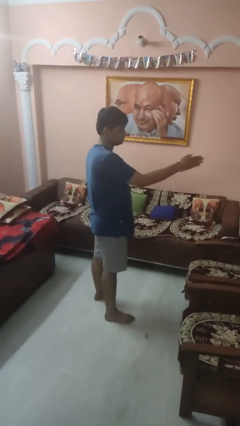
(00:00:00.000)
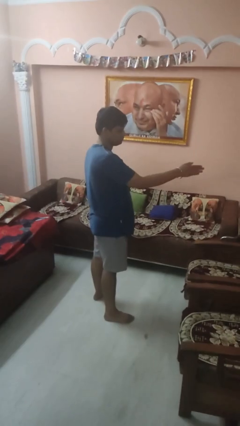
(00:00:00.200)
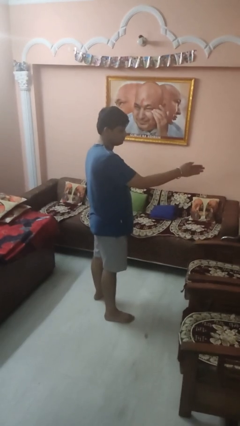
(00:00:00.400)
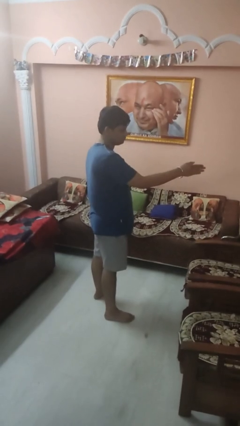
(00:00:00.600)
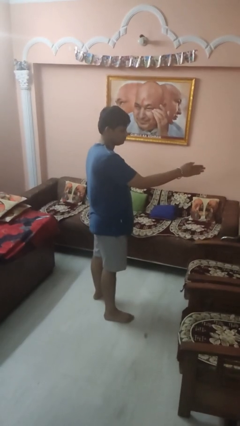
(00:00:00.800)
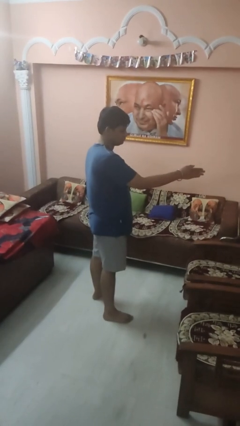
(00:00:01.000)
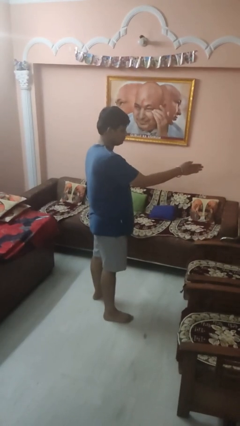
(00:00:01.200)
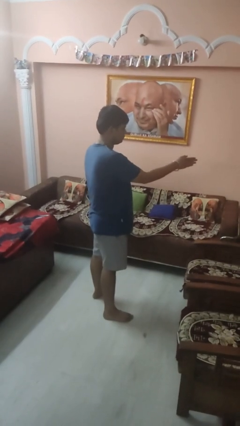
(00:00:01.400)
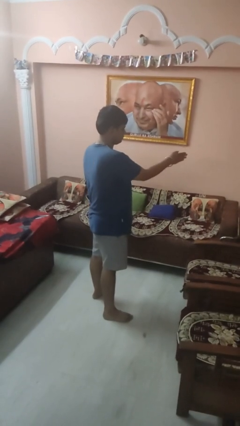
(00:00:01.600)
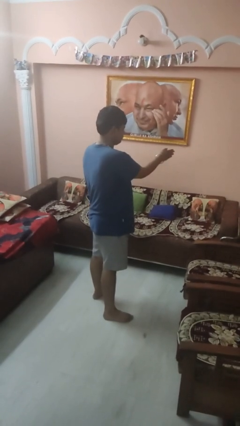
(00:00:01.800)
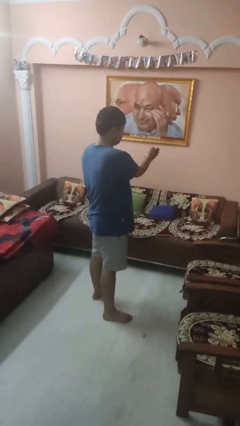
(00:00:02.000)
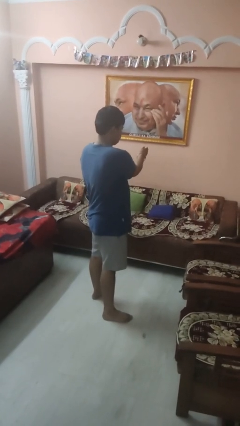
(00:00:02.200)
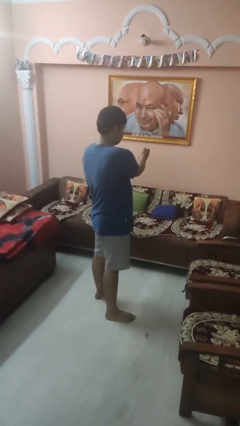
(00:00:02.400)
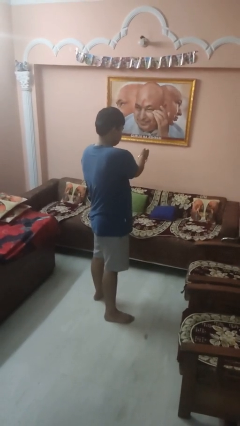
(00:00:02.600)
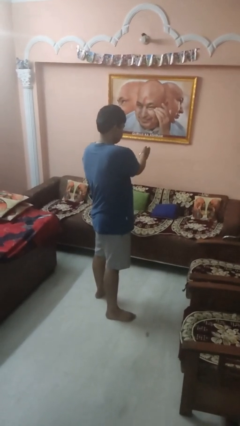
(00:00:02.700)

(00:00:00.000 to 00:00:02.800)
person gestures swipe left

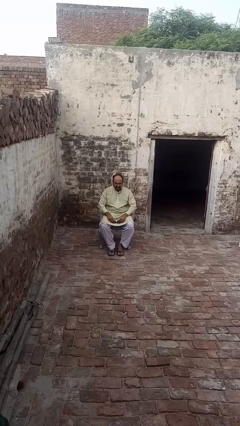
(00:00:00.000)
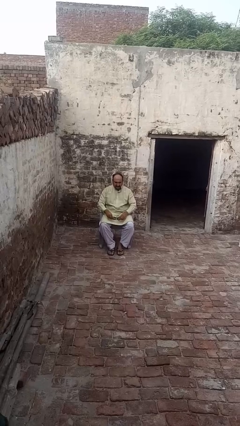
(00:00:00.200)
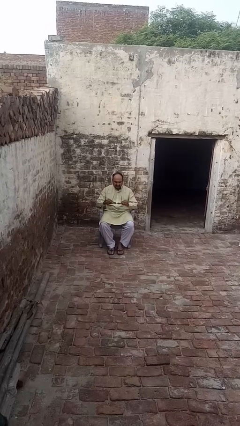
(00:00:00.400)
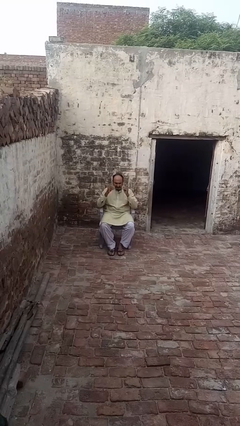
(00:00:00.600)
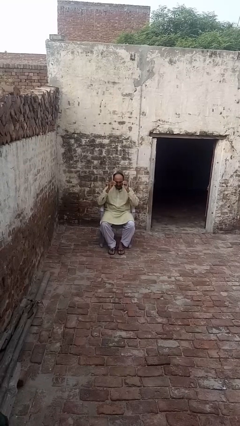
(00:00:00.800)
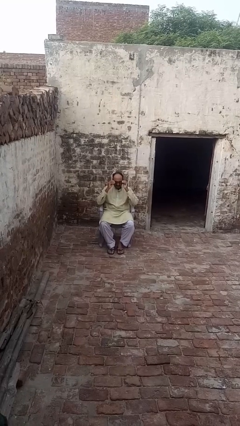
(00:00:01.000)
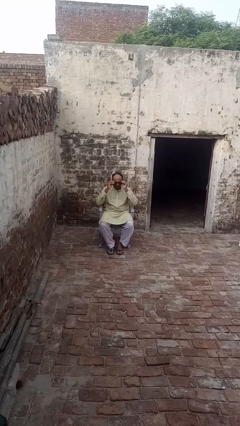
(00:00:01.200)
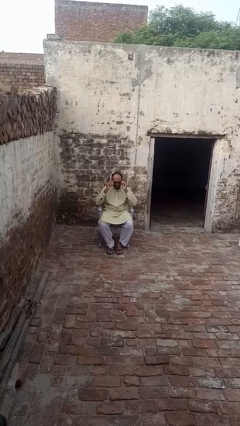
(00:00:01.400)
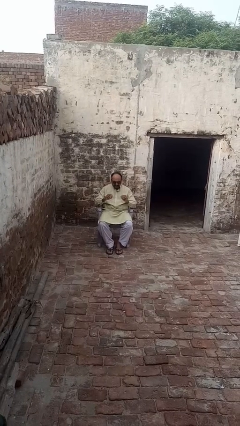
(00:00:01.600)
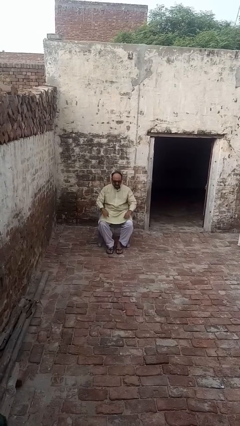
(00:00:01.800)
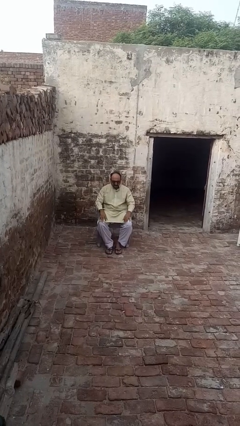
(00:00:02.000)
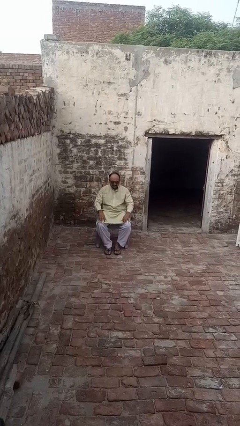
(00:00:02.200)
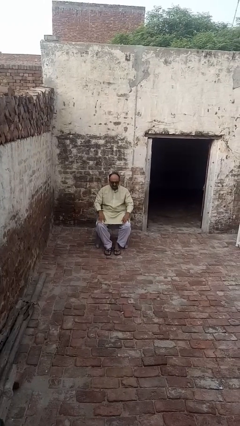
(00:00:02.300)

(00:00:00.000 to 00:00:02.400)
person puts on sunglasses

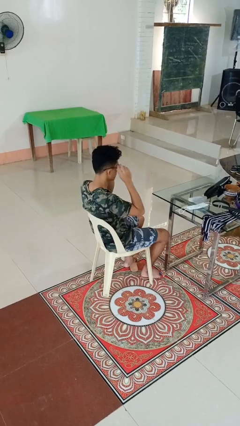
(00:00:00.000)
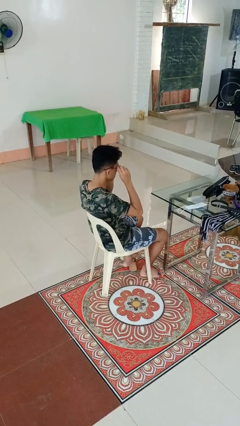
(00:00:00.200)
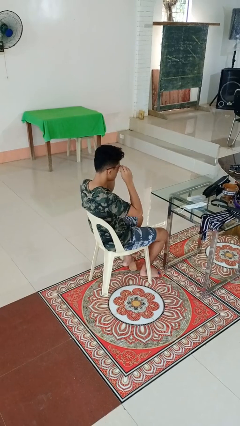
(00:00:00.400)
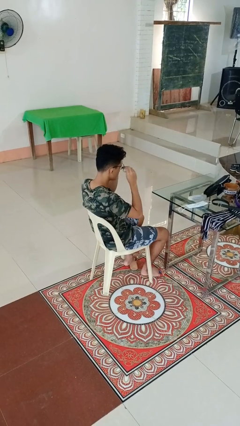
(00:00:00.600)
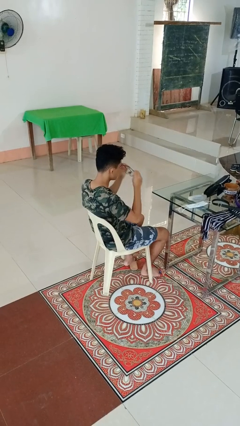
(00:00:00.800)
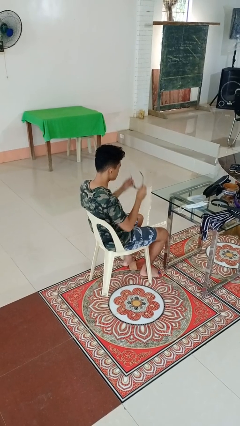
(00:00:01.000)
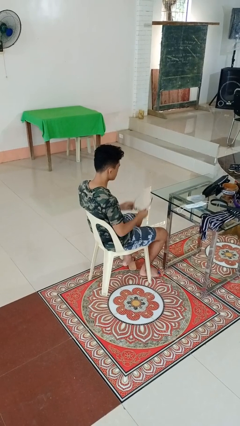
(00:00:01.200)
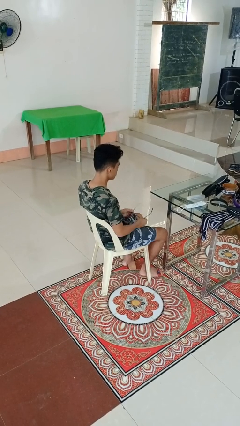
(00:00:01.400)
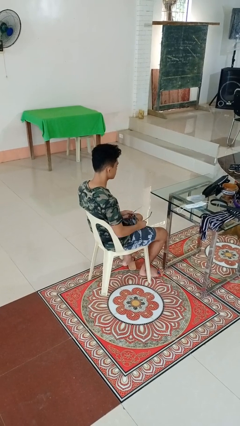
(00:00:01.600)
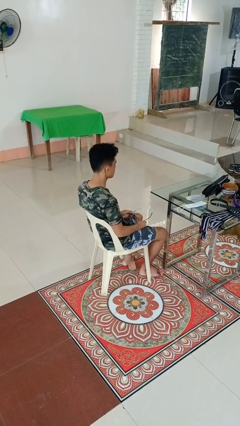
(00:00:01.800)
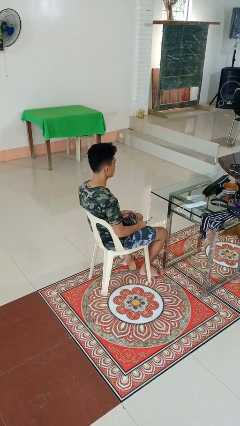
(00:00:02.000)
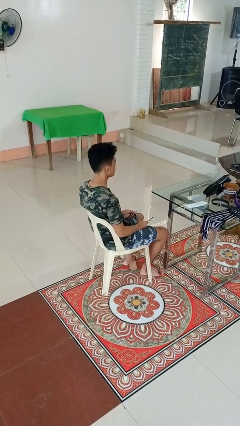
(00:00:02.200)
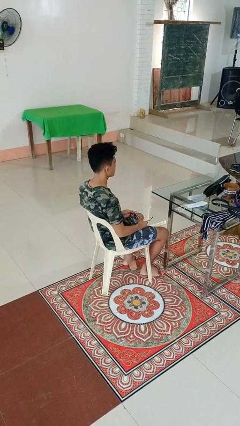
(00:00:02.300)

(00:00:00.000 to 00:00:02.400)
person takes off glasses

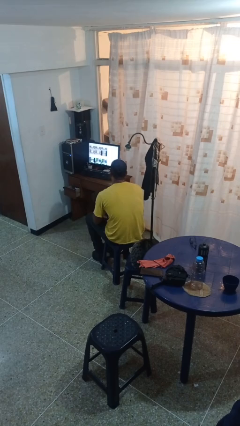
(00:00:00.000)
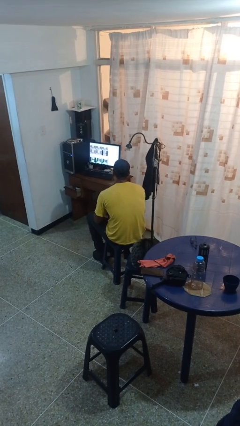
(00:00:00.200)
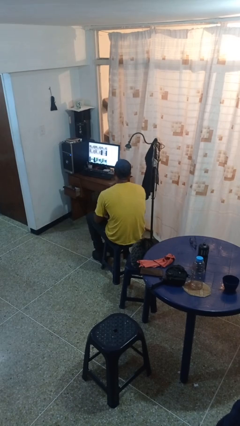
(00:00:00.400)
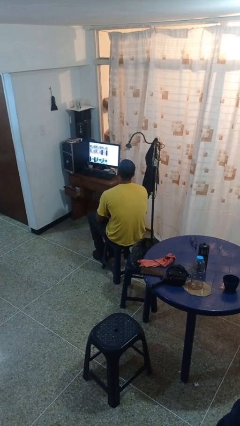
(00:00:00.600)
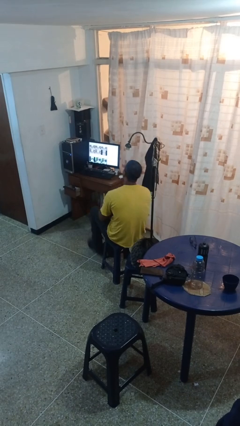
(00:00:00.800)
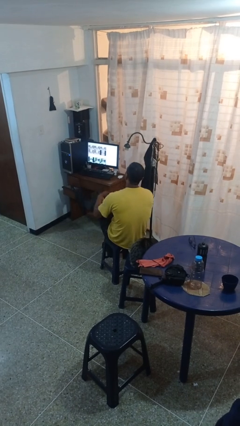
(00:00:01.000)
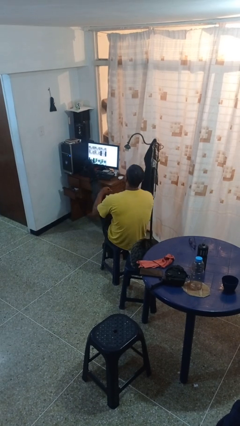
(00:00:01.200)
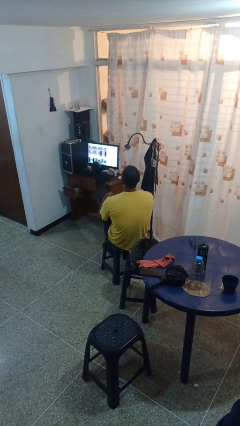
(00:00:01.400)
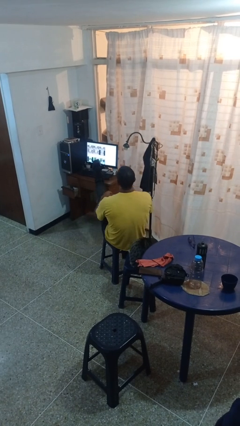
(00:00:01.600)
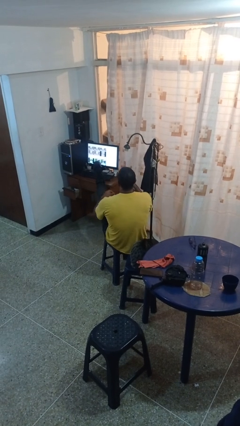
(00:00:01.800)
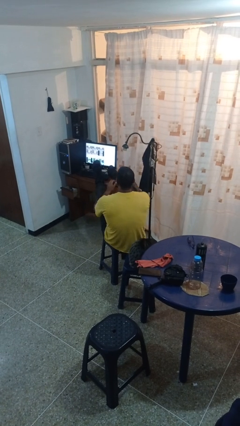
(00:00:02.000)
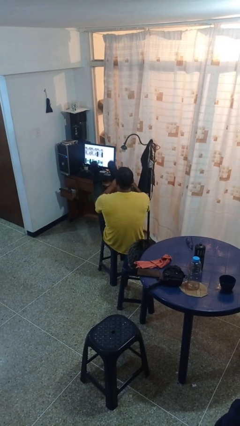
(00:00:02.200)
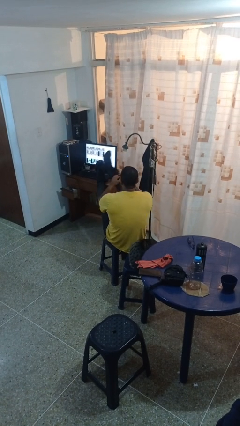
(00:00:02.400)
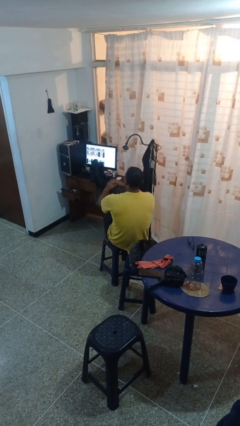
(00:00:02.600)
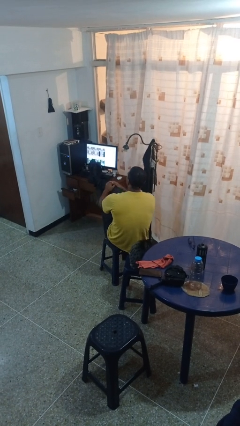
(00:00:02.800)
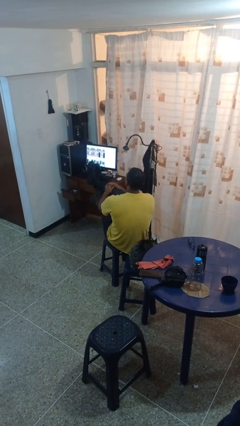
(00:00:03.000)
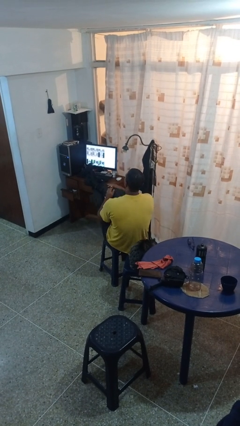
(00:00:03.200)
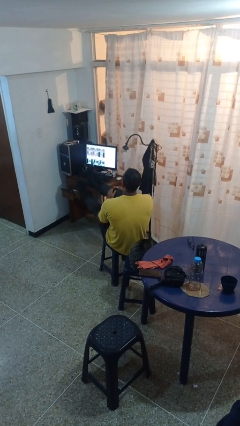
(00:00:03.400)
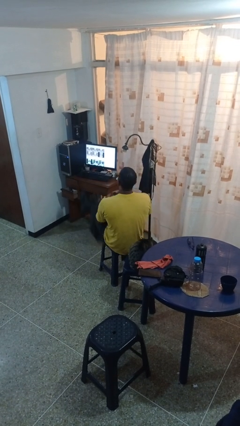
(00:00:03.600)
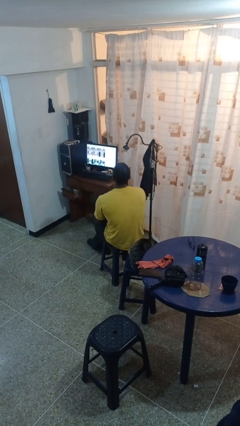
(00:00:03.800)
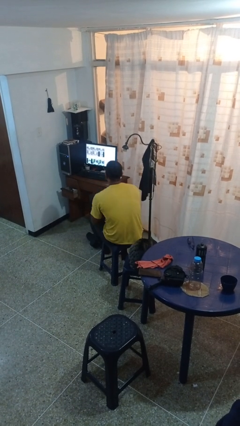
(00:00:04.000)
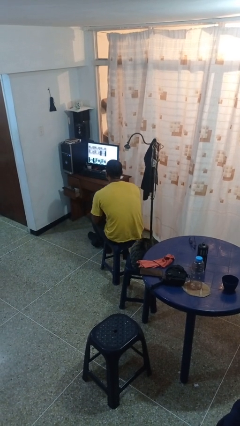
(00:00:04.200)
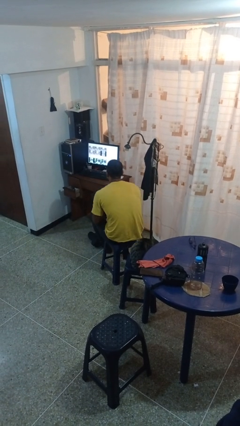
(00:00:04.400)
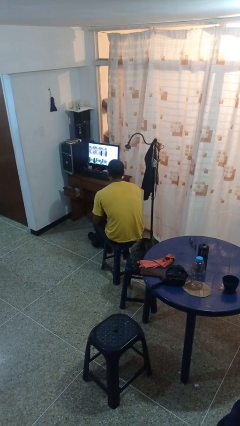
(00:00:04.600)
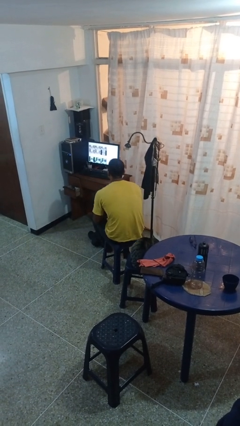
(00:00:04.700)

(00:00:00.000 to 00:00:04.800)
person puts feet up

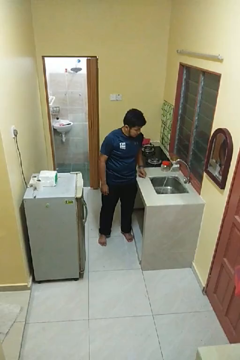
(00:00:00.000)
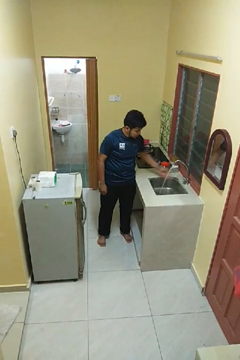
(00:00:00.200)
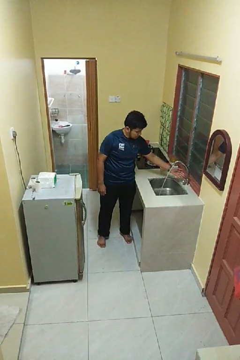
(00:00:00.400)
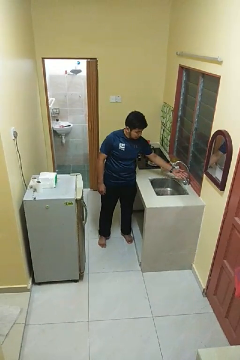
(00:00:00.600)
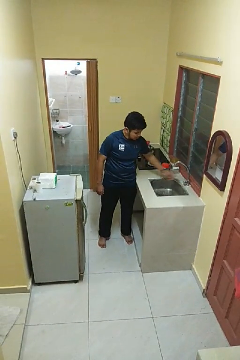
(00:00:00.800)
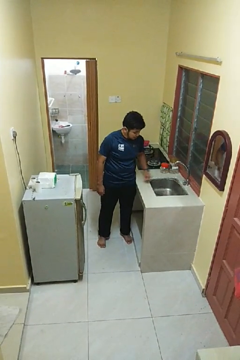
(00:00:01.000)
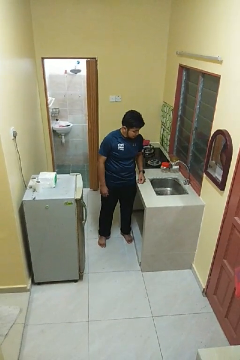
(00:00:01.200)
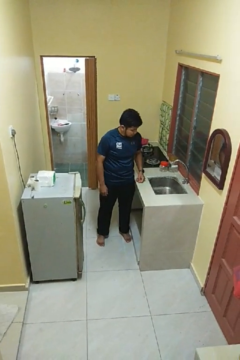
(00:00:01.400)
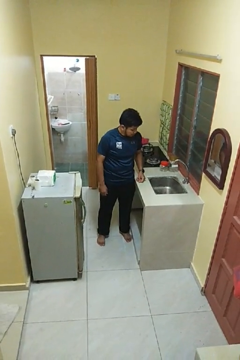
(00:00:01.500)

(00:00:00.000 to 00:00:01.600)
person turns off faucet

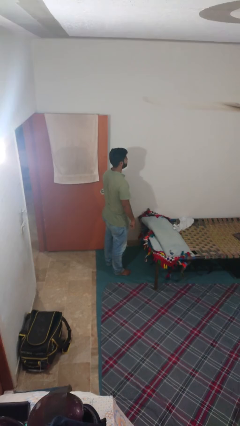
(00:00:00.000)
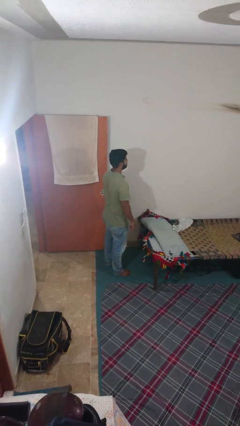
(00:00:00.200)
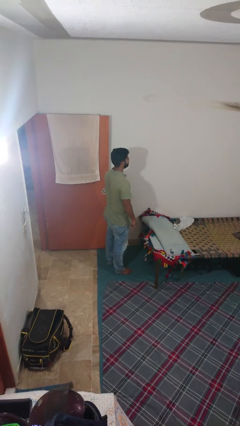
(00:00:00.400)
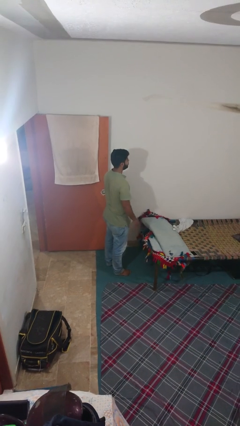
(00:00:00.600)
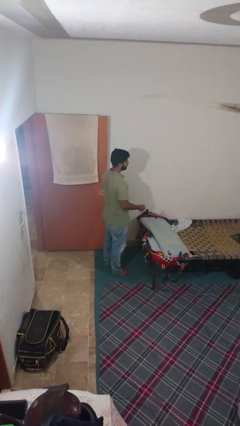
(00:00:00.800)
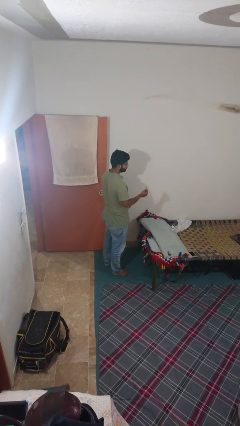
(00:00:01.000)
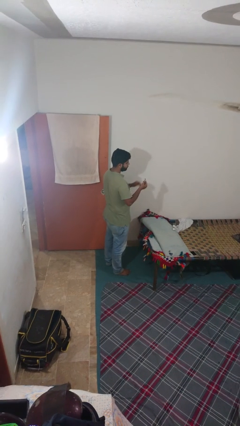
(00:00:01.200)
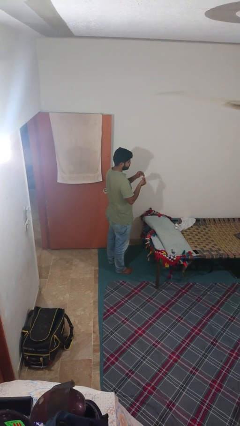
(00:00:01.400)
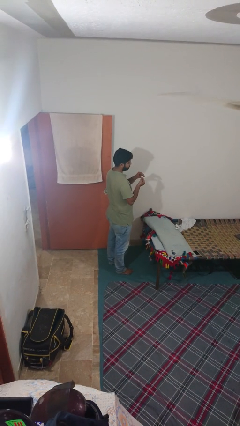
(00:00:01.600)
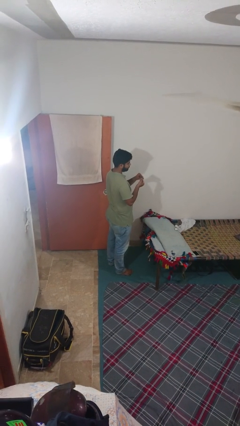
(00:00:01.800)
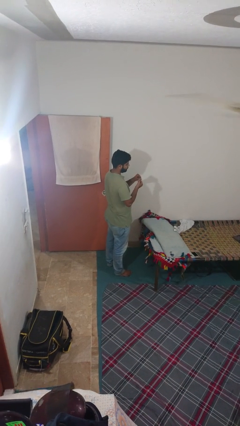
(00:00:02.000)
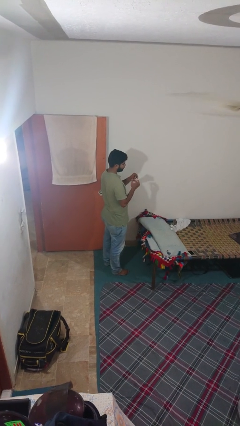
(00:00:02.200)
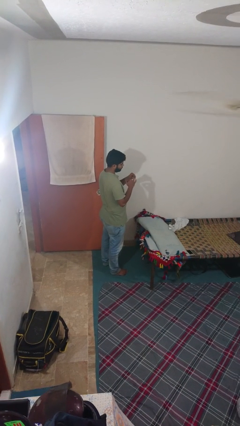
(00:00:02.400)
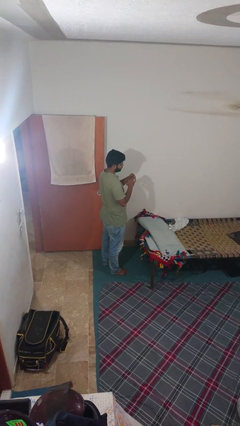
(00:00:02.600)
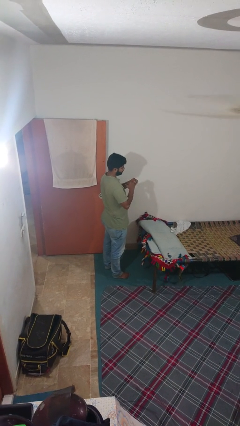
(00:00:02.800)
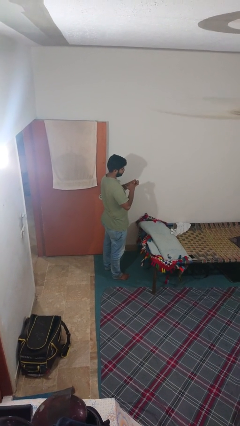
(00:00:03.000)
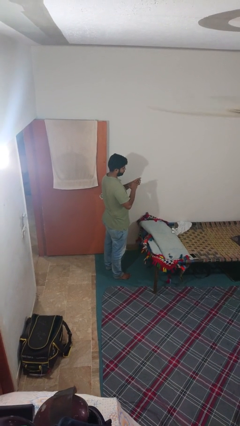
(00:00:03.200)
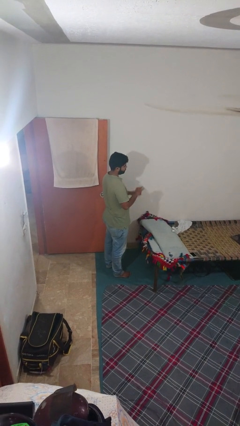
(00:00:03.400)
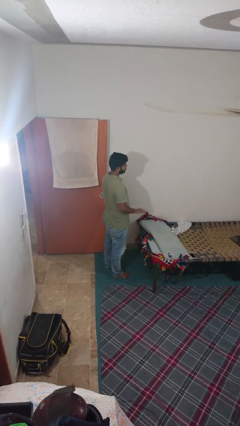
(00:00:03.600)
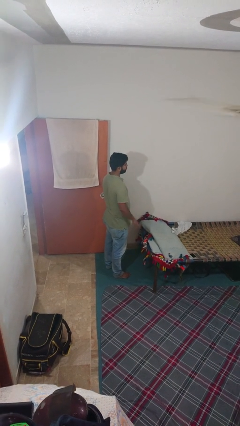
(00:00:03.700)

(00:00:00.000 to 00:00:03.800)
person puts on ring
